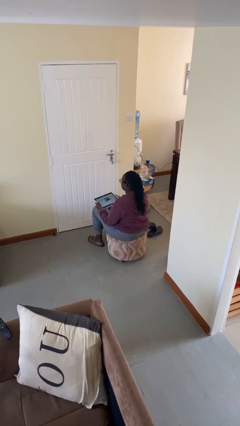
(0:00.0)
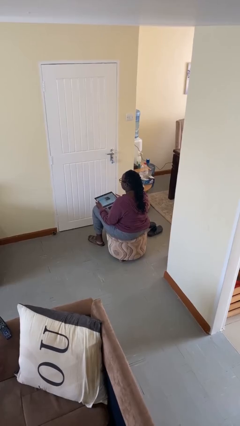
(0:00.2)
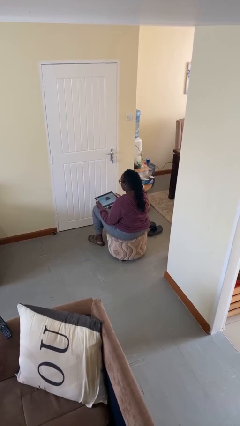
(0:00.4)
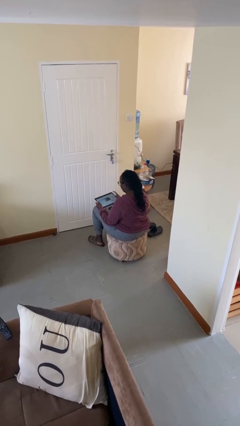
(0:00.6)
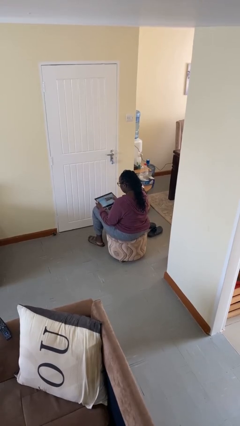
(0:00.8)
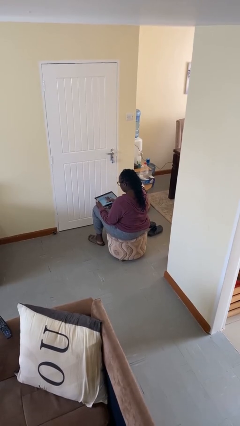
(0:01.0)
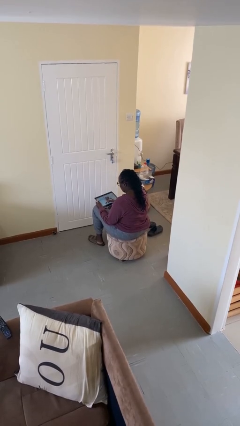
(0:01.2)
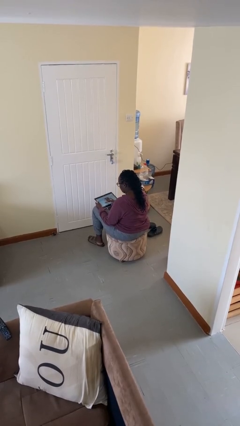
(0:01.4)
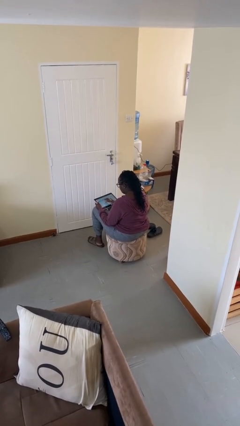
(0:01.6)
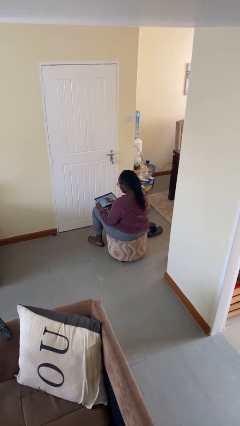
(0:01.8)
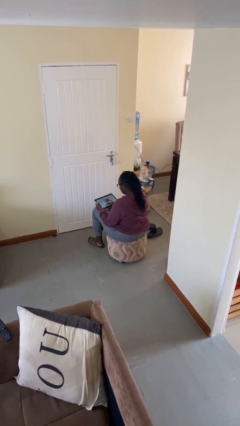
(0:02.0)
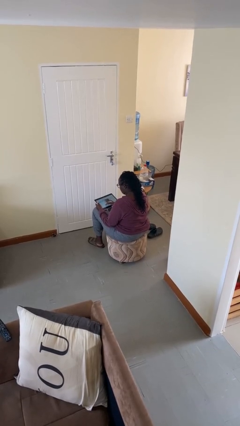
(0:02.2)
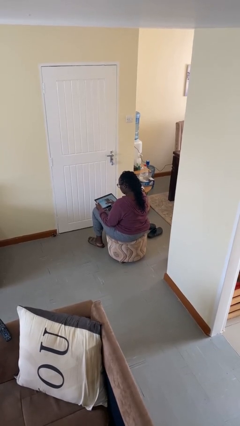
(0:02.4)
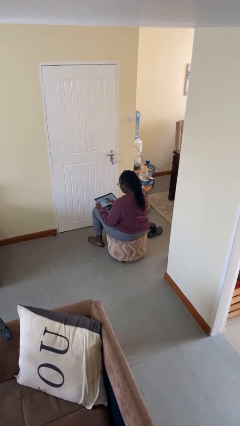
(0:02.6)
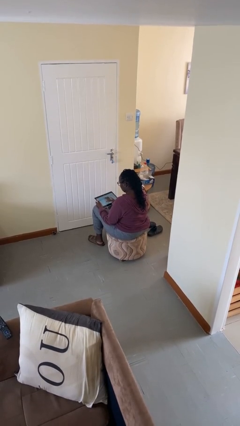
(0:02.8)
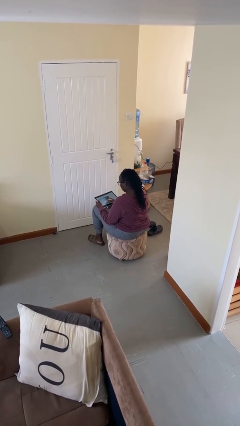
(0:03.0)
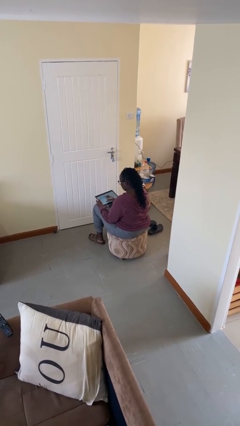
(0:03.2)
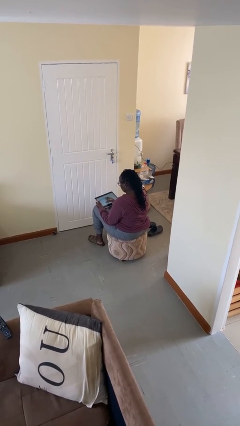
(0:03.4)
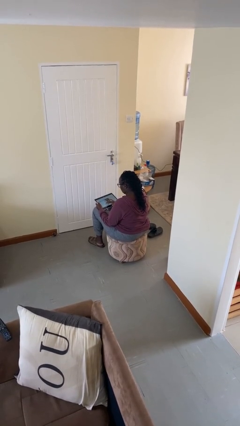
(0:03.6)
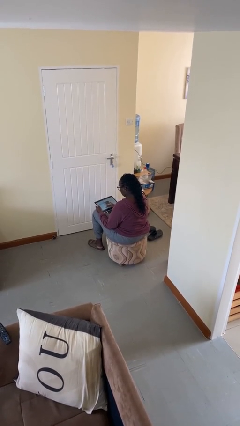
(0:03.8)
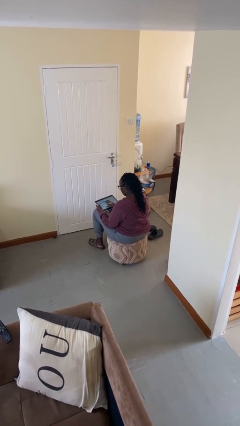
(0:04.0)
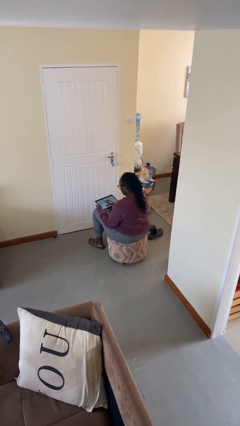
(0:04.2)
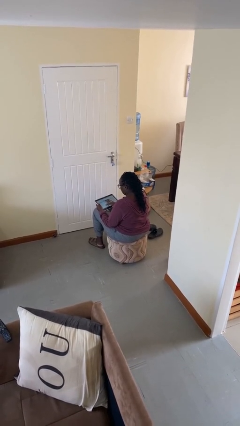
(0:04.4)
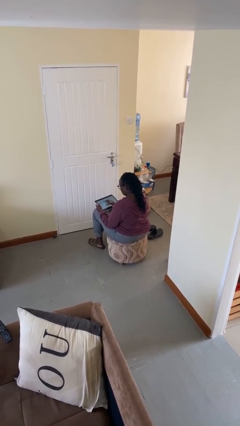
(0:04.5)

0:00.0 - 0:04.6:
person interacts with tablet

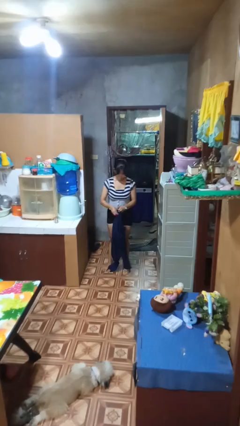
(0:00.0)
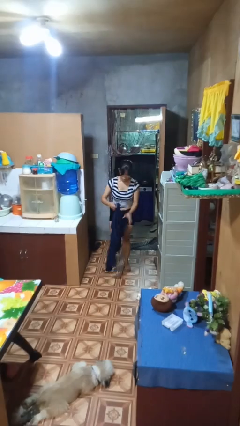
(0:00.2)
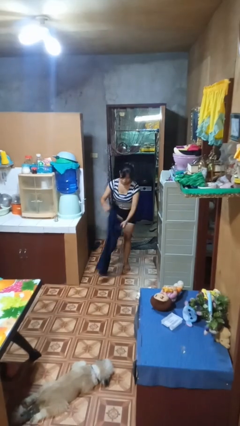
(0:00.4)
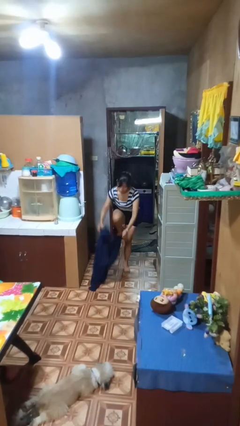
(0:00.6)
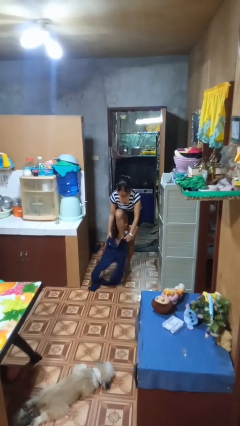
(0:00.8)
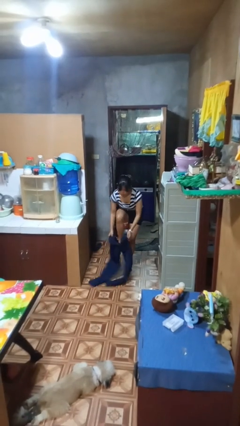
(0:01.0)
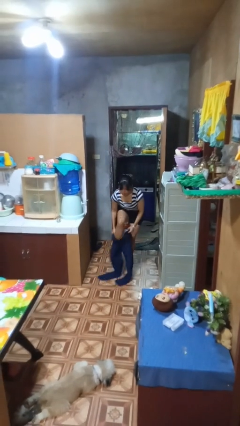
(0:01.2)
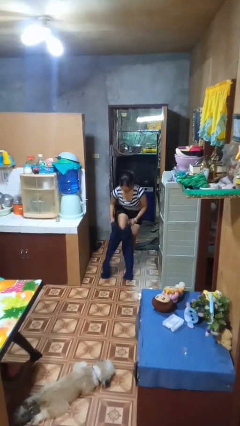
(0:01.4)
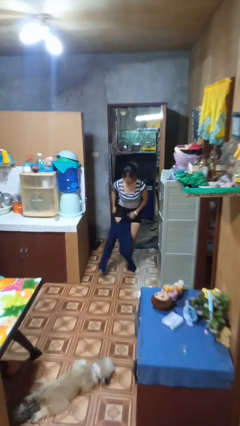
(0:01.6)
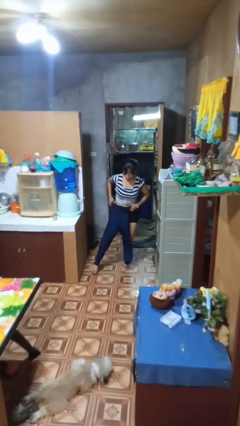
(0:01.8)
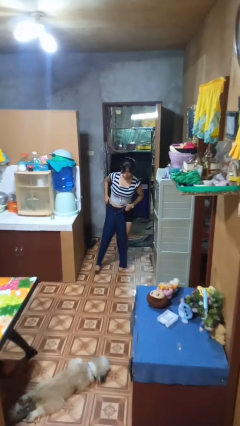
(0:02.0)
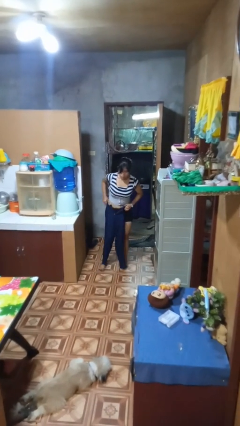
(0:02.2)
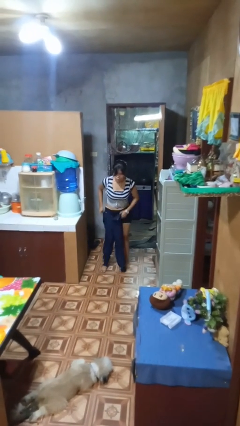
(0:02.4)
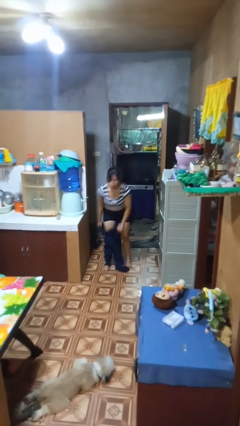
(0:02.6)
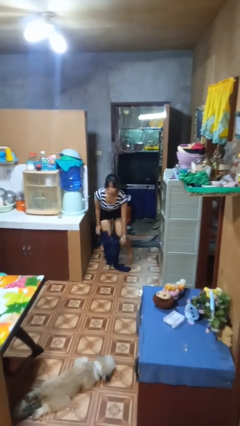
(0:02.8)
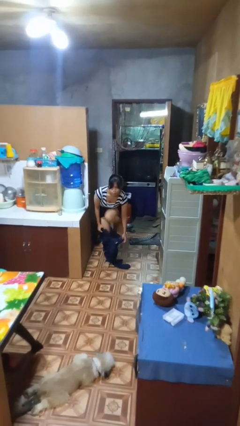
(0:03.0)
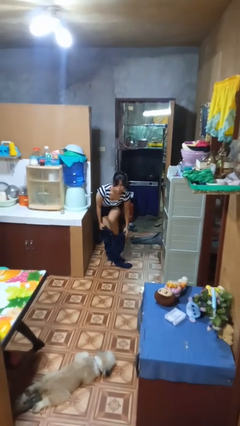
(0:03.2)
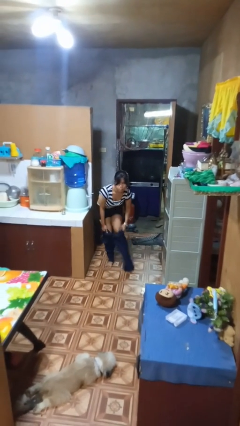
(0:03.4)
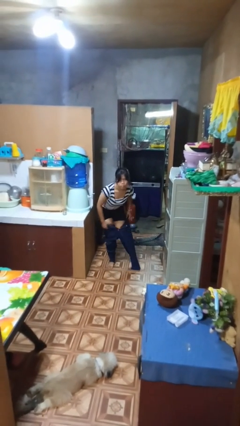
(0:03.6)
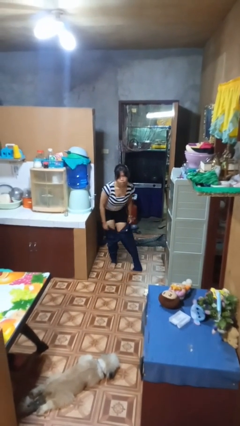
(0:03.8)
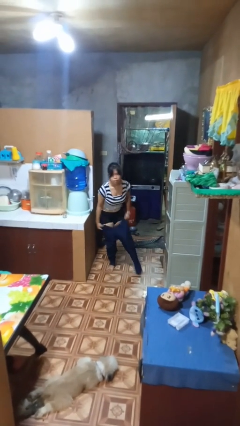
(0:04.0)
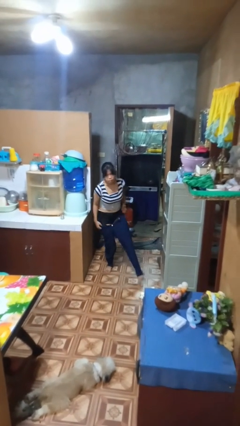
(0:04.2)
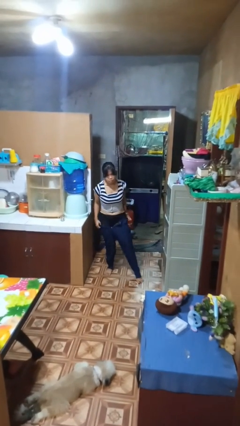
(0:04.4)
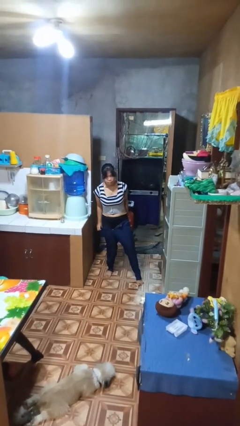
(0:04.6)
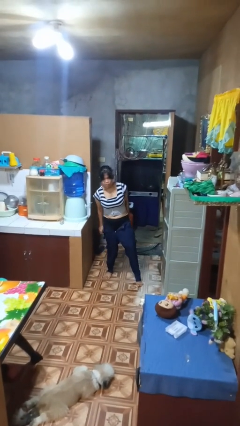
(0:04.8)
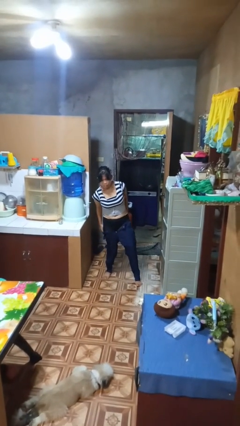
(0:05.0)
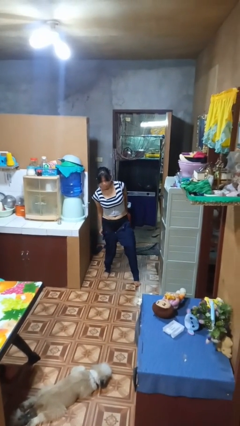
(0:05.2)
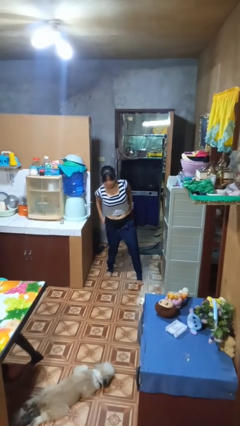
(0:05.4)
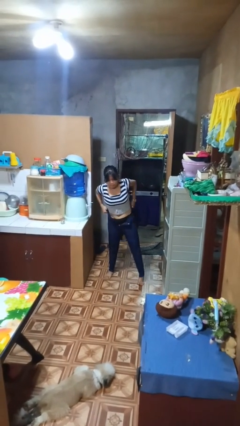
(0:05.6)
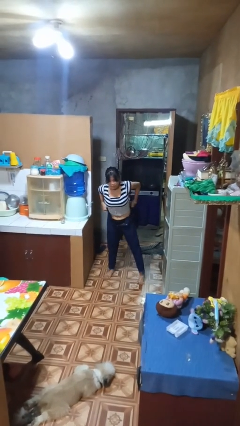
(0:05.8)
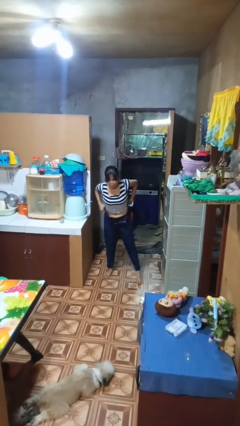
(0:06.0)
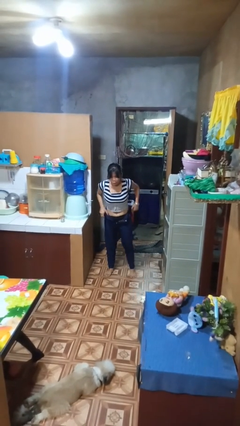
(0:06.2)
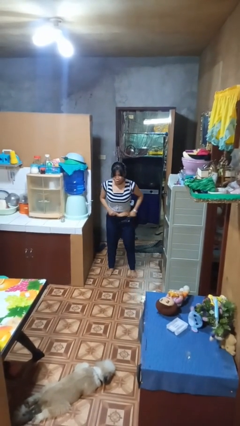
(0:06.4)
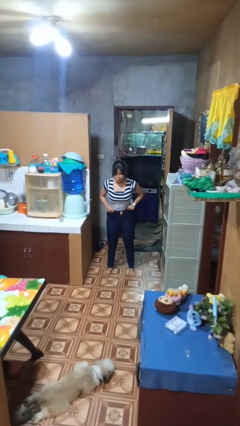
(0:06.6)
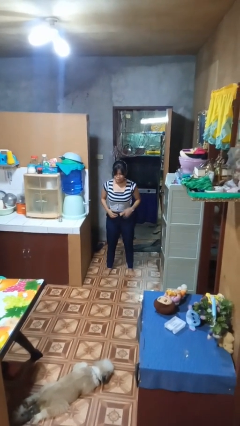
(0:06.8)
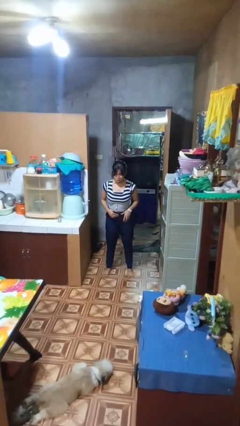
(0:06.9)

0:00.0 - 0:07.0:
person puts on pants

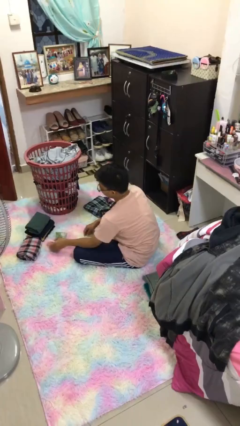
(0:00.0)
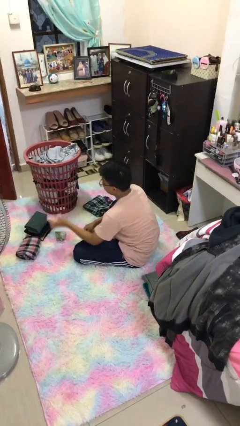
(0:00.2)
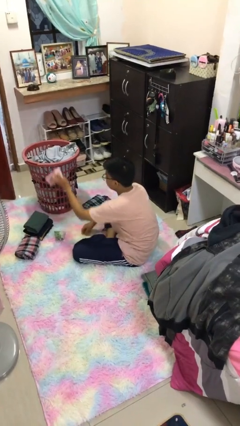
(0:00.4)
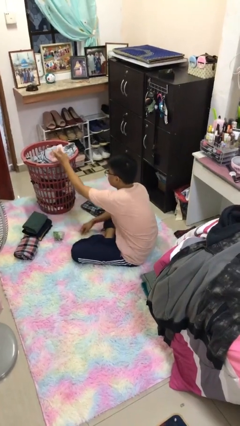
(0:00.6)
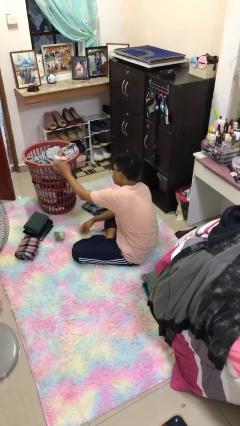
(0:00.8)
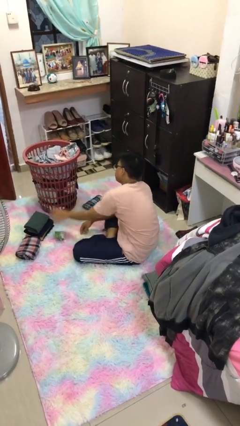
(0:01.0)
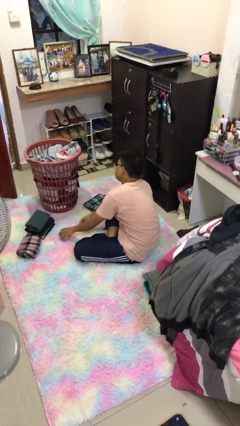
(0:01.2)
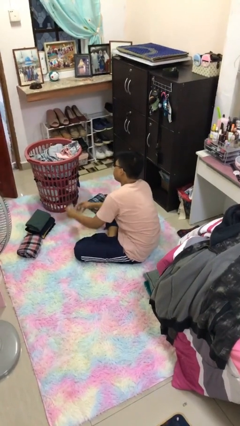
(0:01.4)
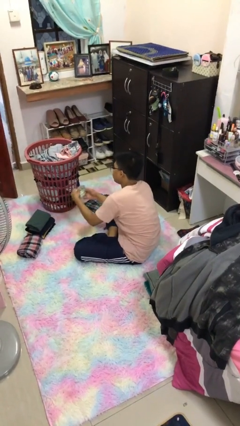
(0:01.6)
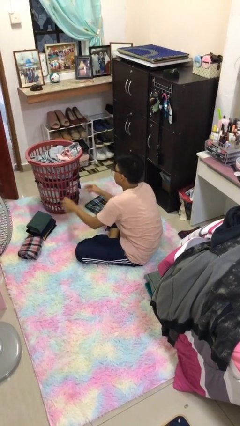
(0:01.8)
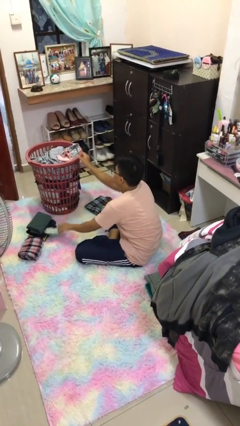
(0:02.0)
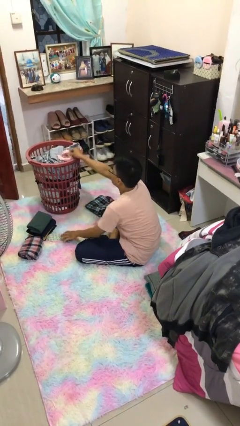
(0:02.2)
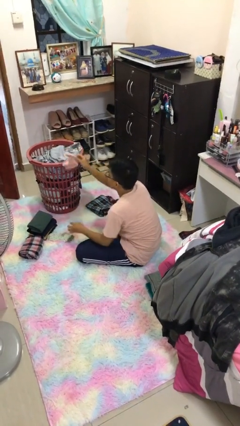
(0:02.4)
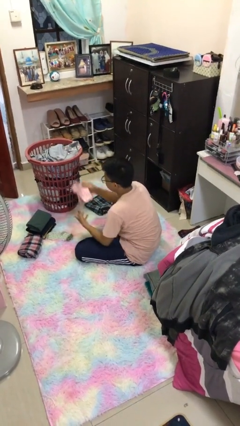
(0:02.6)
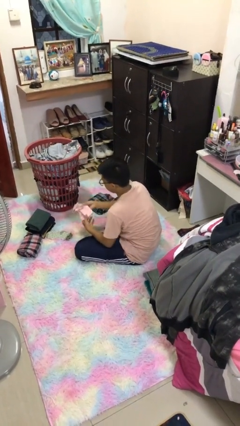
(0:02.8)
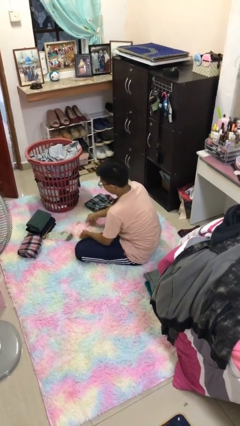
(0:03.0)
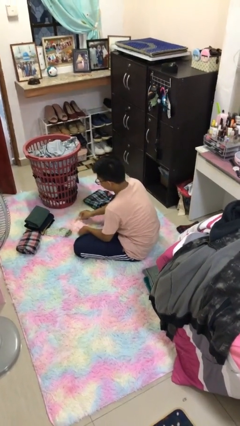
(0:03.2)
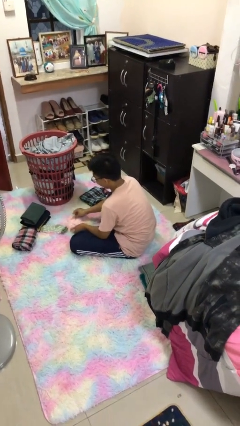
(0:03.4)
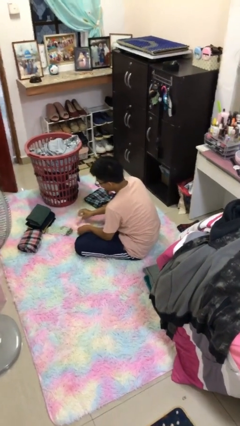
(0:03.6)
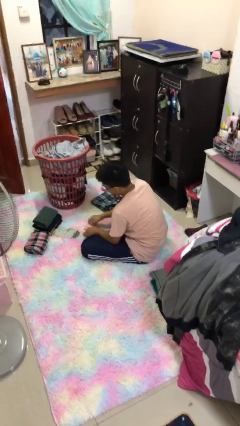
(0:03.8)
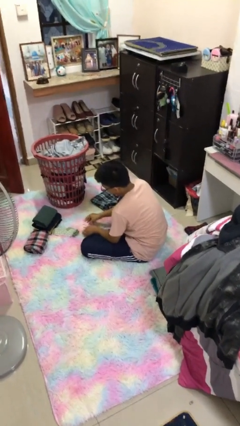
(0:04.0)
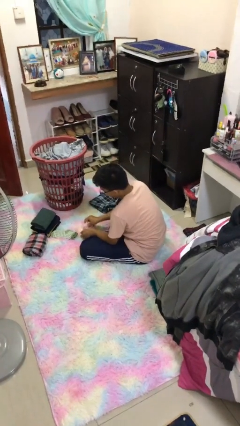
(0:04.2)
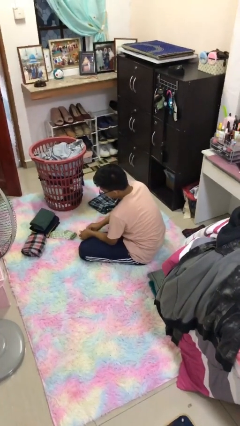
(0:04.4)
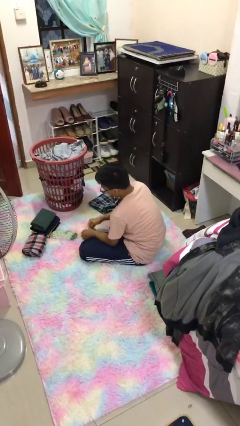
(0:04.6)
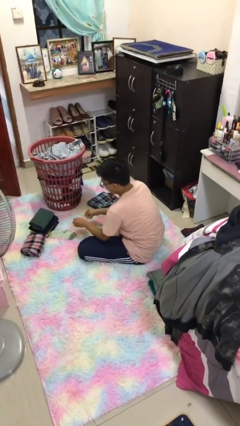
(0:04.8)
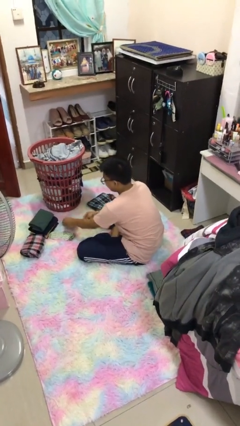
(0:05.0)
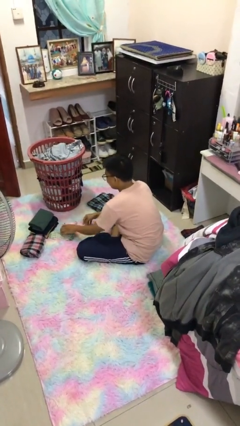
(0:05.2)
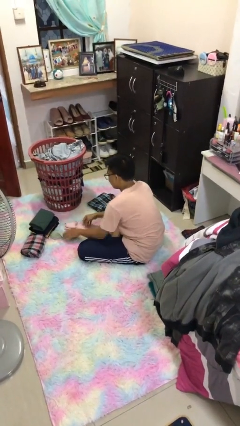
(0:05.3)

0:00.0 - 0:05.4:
person folds socks

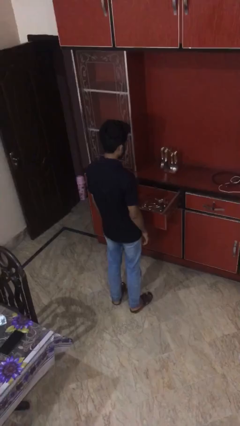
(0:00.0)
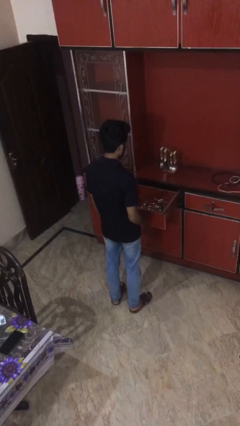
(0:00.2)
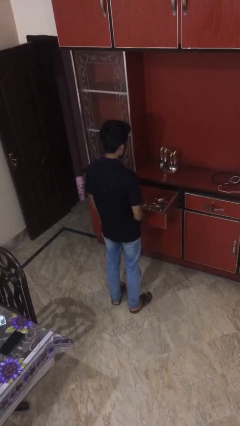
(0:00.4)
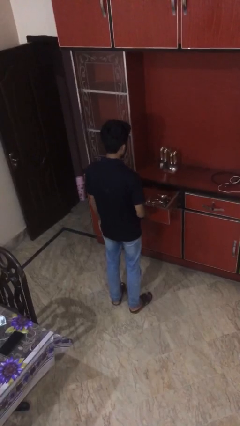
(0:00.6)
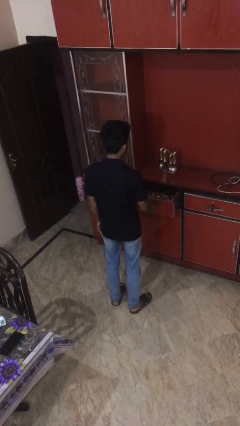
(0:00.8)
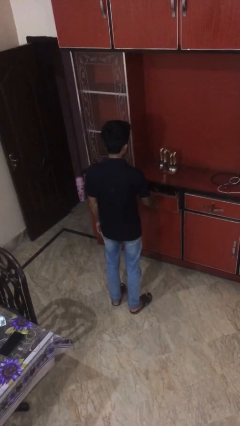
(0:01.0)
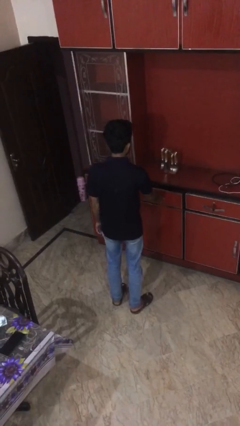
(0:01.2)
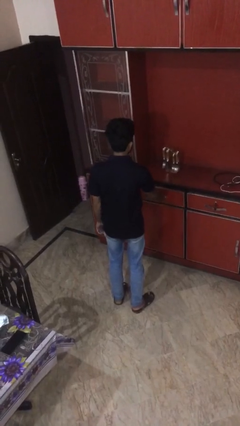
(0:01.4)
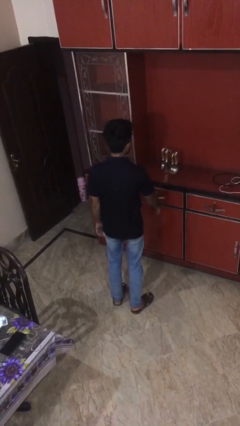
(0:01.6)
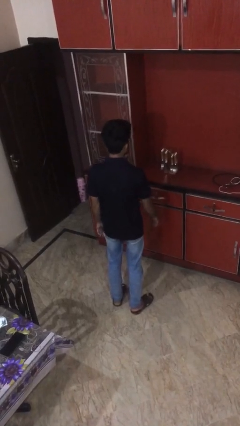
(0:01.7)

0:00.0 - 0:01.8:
person closes kitchen drawer
